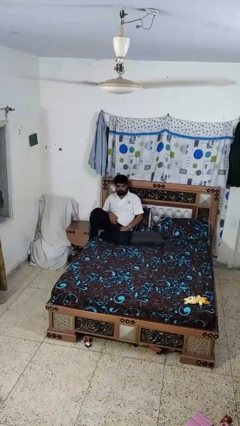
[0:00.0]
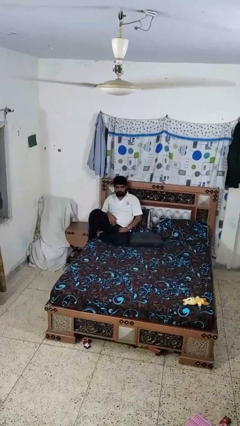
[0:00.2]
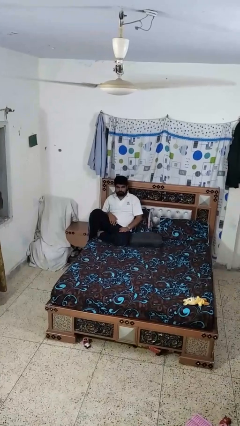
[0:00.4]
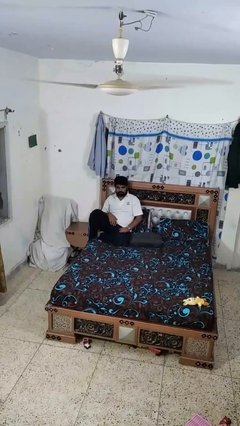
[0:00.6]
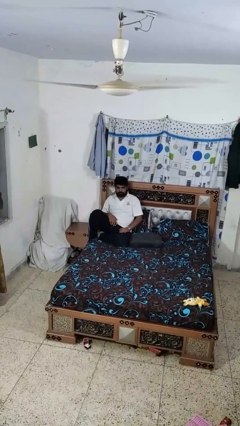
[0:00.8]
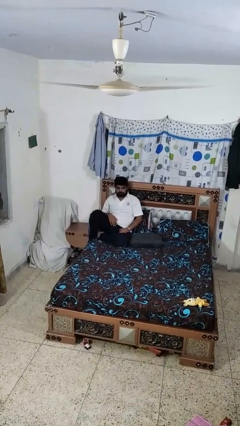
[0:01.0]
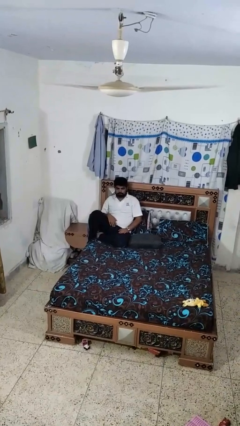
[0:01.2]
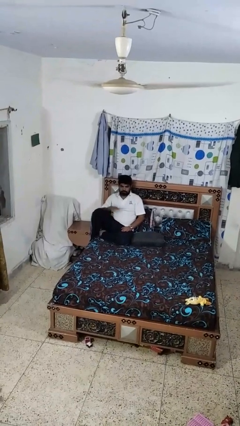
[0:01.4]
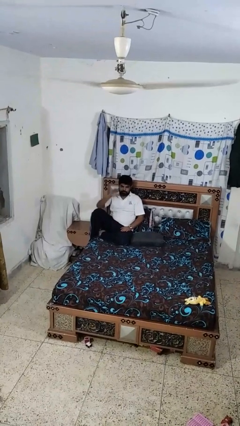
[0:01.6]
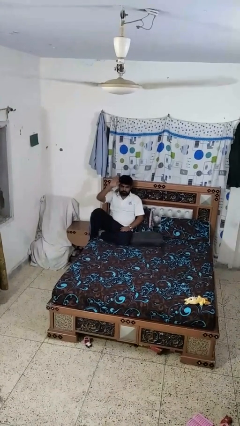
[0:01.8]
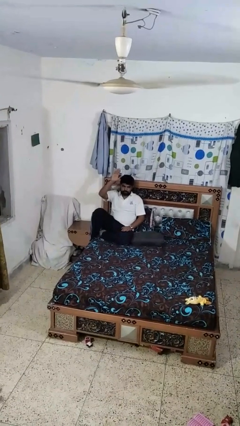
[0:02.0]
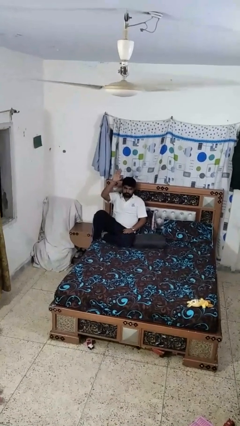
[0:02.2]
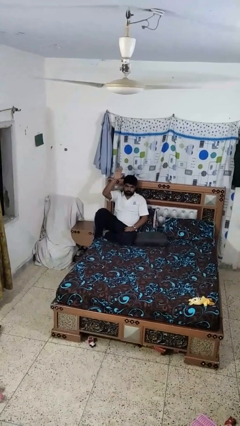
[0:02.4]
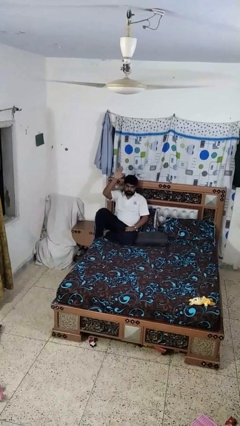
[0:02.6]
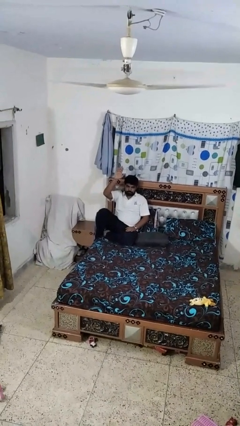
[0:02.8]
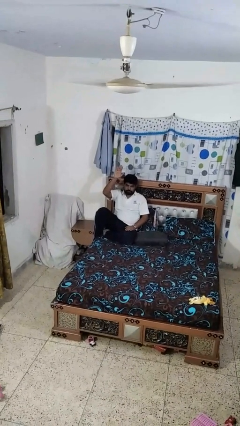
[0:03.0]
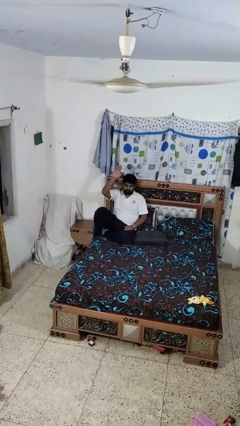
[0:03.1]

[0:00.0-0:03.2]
person gestures raise hand

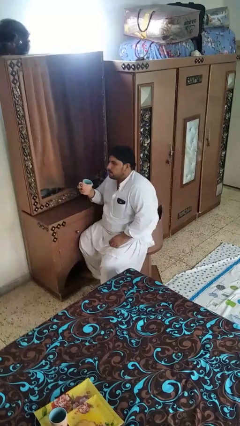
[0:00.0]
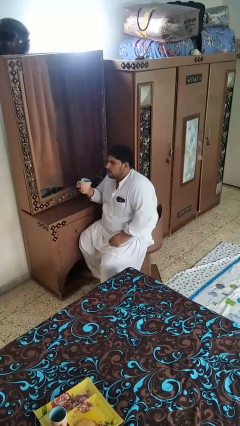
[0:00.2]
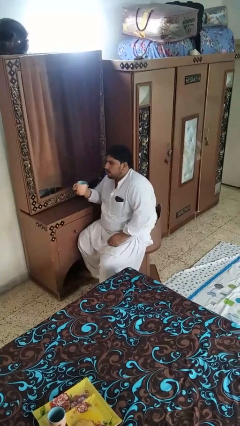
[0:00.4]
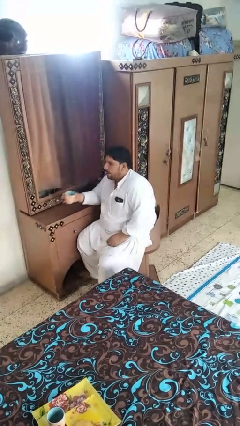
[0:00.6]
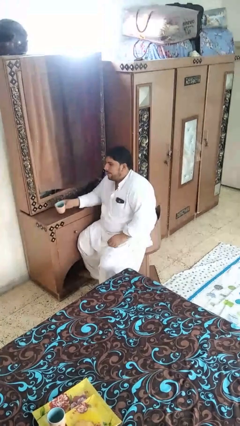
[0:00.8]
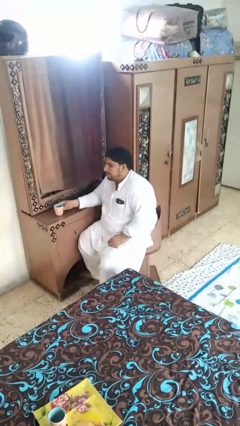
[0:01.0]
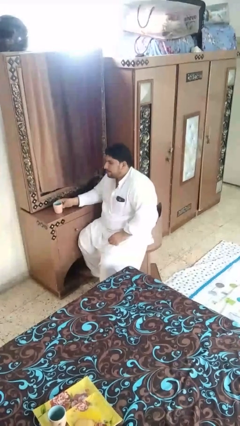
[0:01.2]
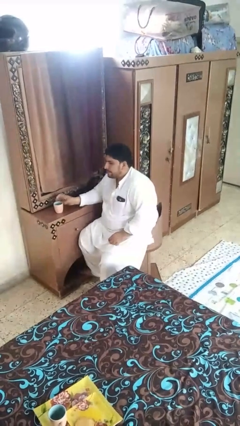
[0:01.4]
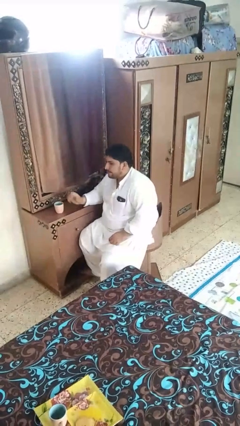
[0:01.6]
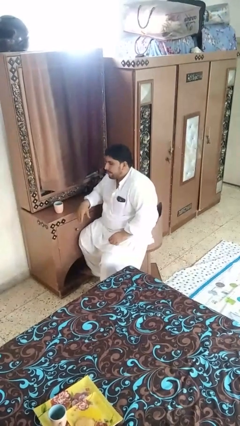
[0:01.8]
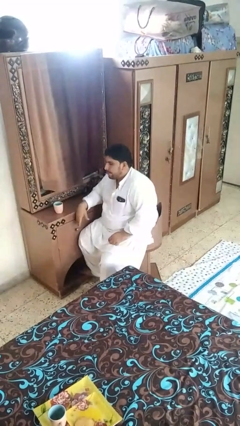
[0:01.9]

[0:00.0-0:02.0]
person puts down object on table

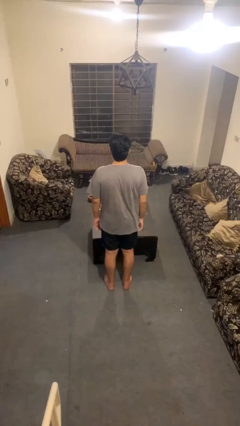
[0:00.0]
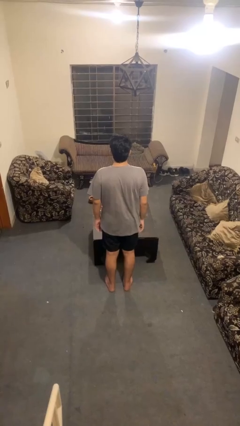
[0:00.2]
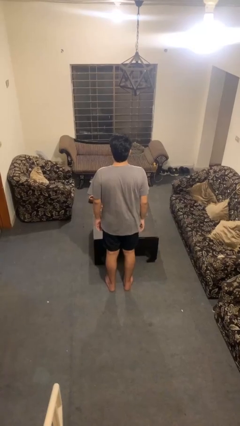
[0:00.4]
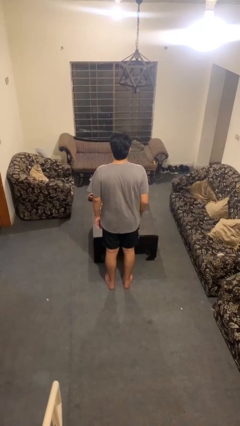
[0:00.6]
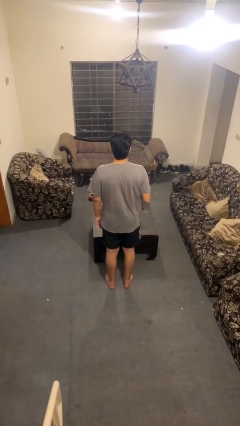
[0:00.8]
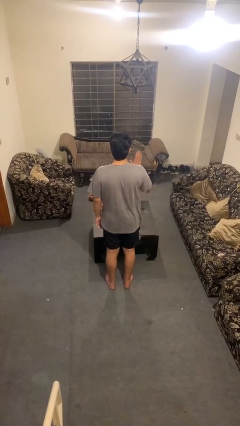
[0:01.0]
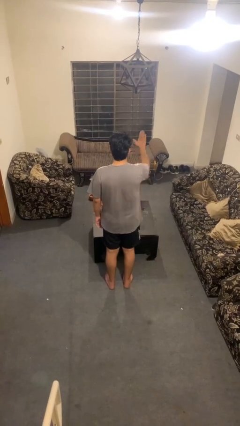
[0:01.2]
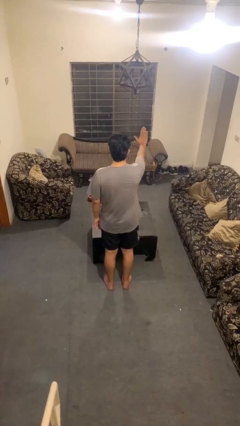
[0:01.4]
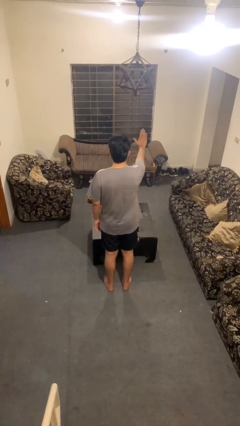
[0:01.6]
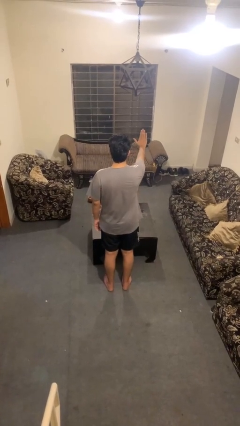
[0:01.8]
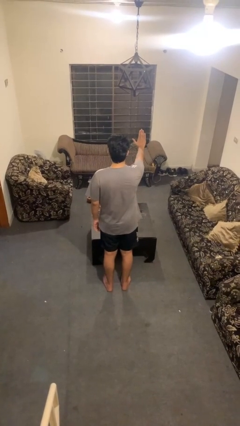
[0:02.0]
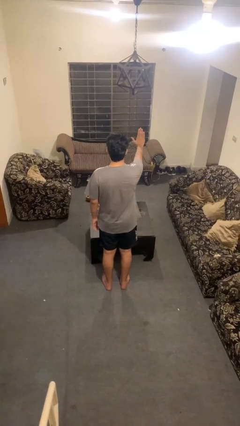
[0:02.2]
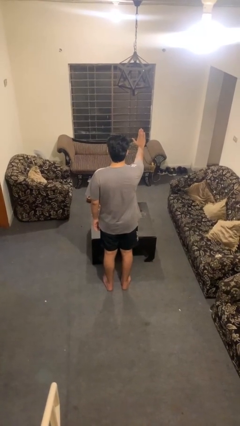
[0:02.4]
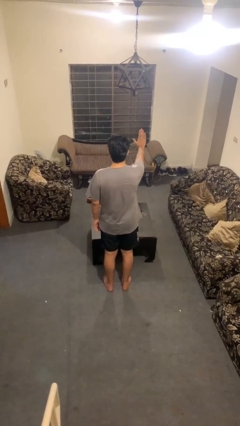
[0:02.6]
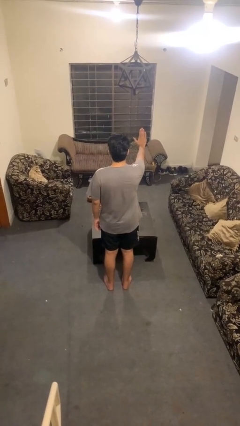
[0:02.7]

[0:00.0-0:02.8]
person gestures stop

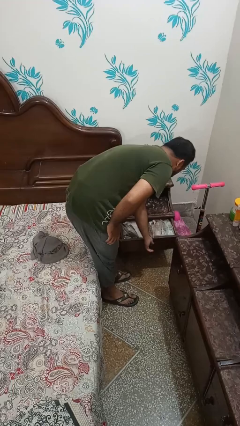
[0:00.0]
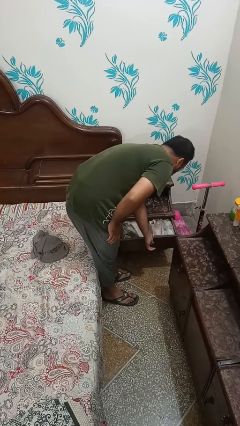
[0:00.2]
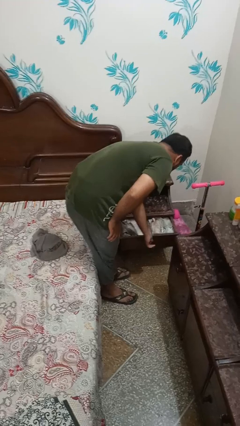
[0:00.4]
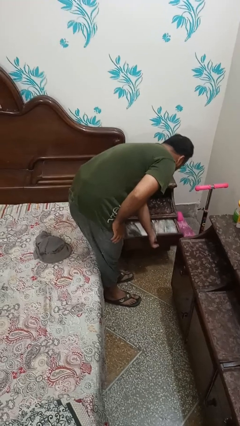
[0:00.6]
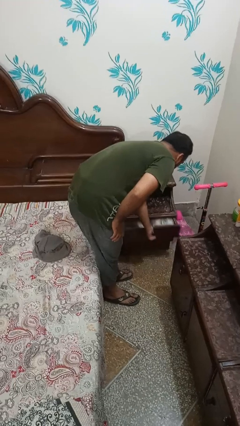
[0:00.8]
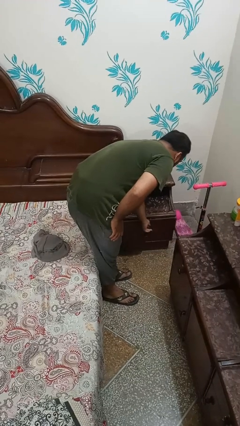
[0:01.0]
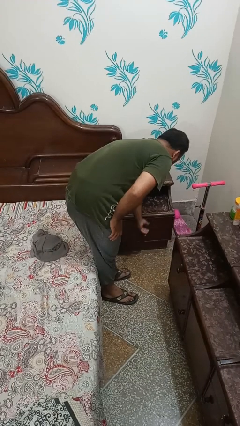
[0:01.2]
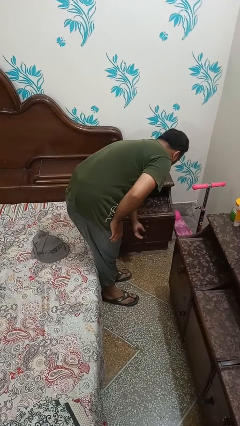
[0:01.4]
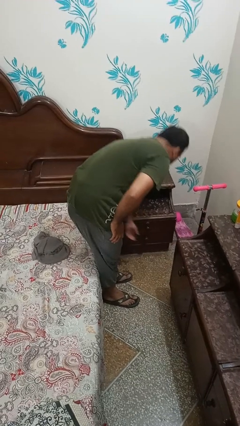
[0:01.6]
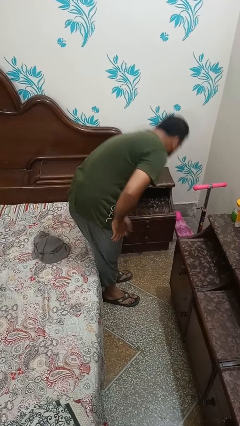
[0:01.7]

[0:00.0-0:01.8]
person closes dresser drawer

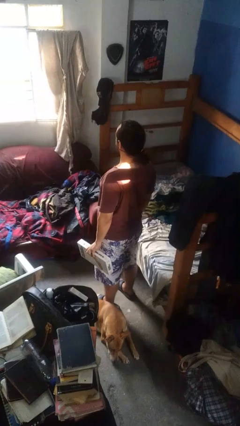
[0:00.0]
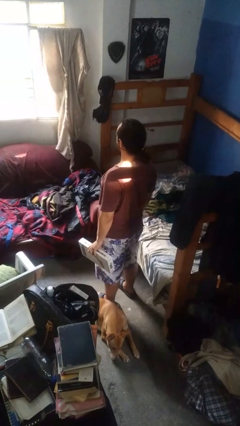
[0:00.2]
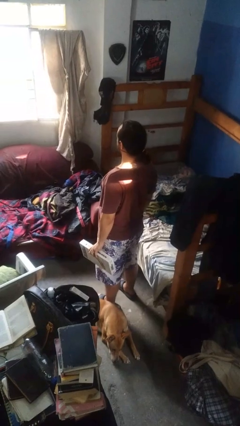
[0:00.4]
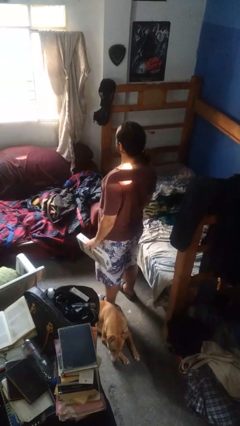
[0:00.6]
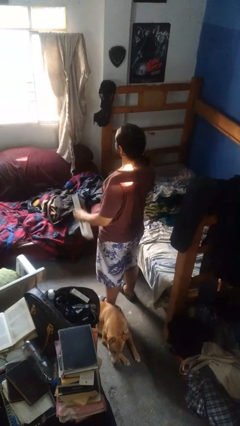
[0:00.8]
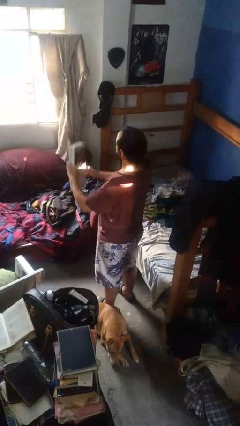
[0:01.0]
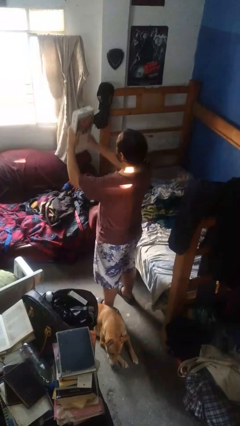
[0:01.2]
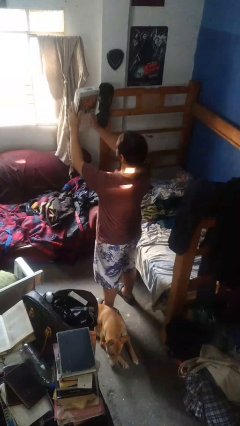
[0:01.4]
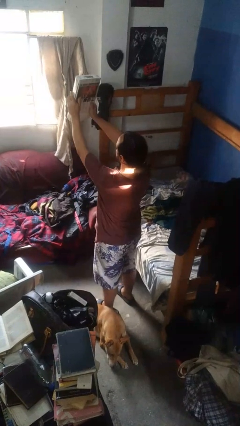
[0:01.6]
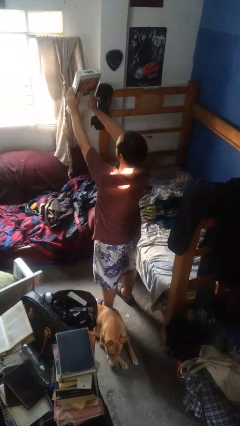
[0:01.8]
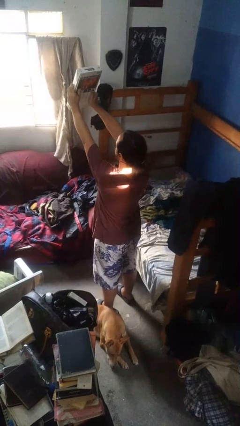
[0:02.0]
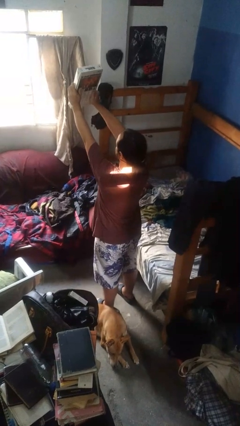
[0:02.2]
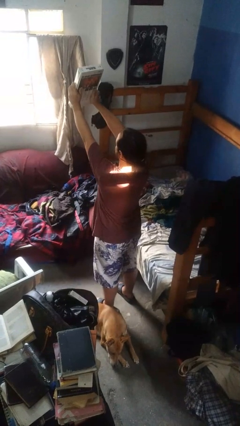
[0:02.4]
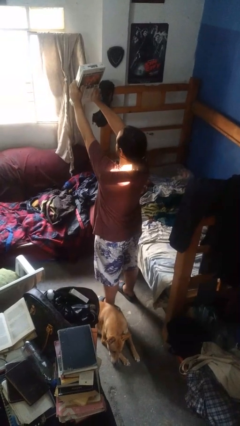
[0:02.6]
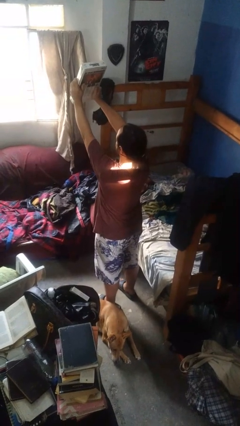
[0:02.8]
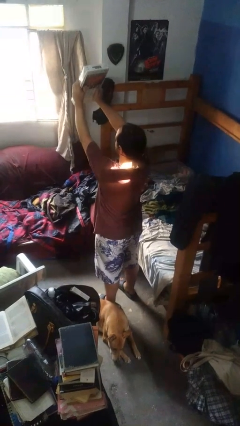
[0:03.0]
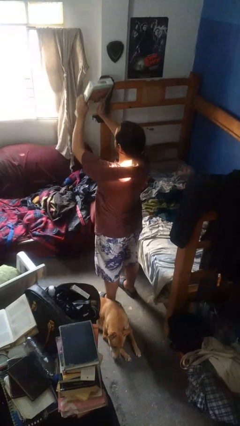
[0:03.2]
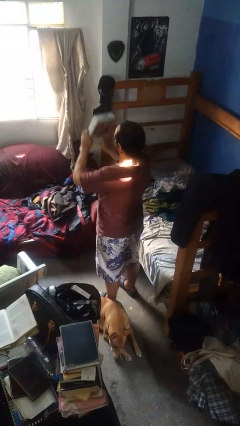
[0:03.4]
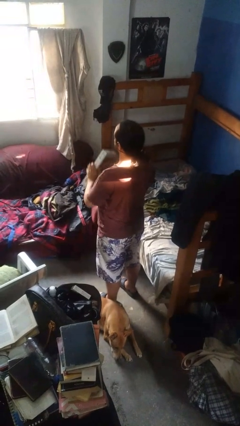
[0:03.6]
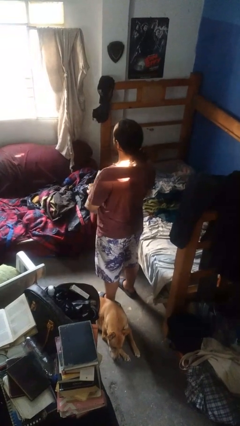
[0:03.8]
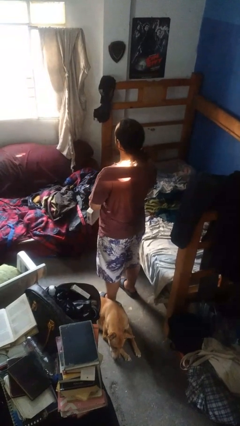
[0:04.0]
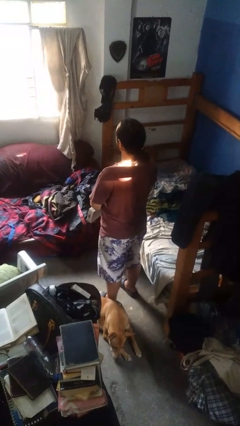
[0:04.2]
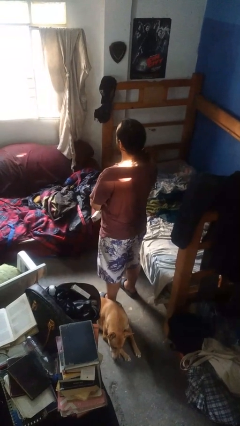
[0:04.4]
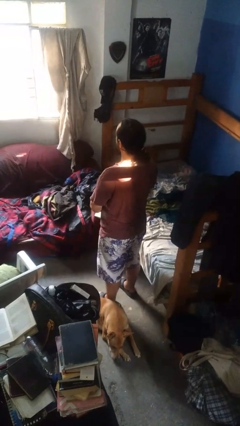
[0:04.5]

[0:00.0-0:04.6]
person holds object above head

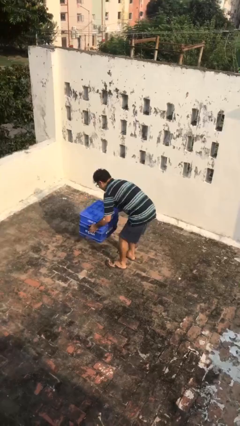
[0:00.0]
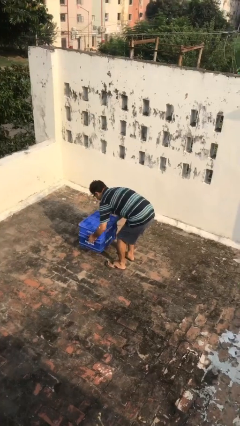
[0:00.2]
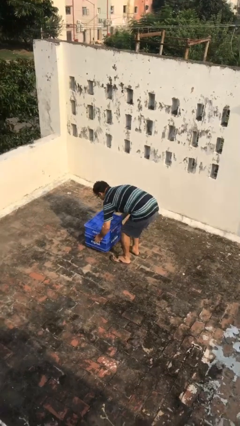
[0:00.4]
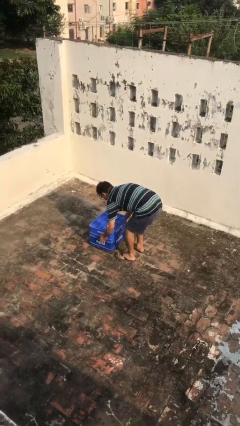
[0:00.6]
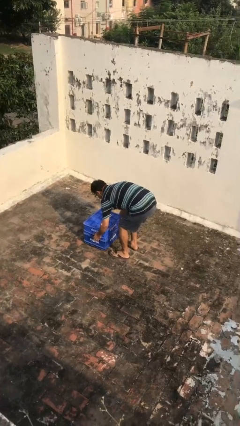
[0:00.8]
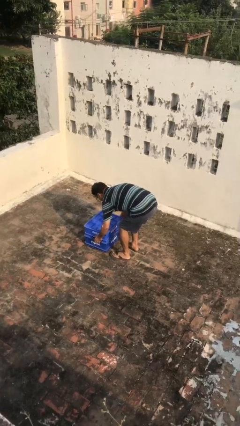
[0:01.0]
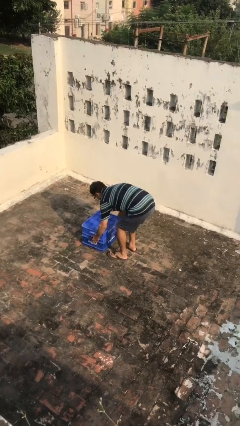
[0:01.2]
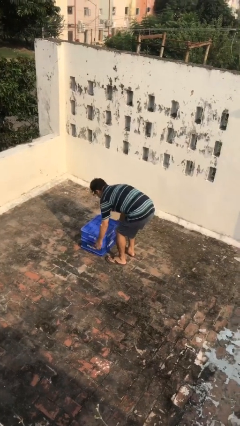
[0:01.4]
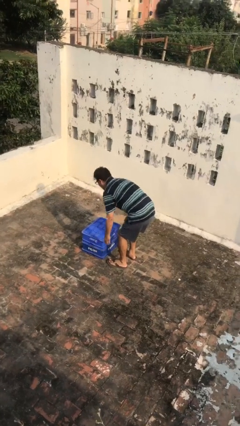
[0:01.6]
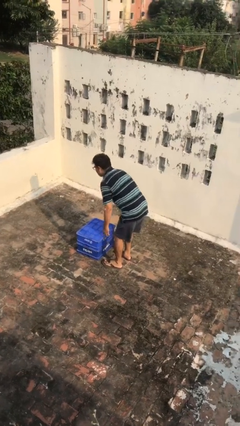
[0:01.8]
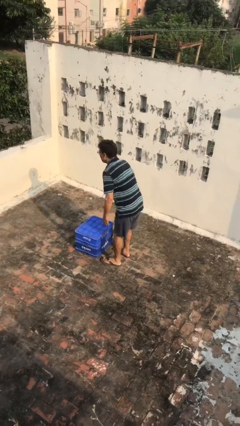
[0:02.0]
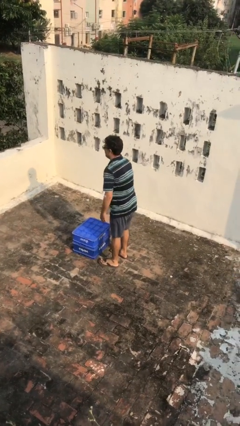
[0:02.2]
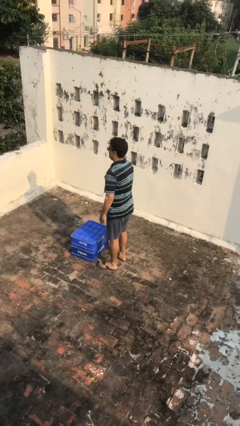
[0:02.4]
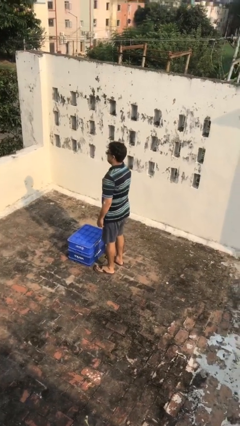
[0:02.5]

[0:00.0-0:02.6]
person puts down object on floor
